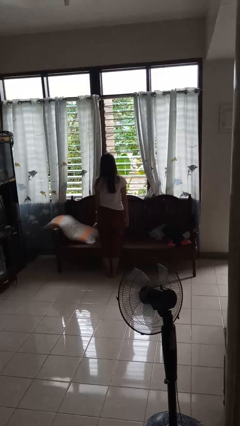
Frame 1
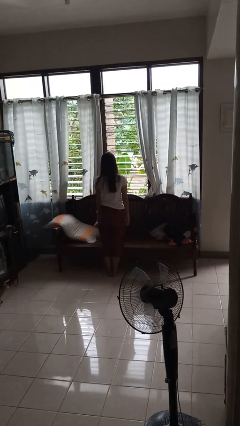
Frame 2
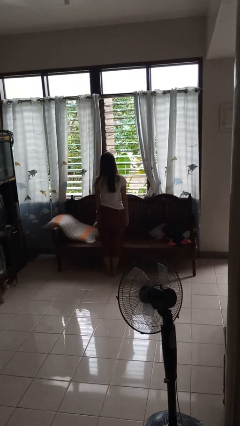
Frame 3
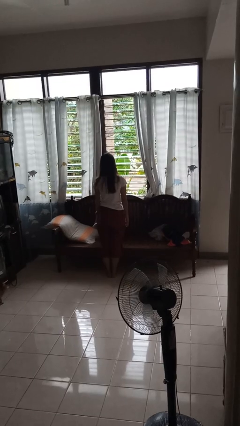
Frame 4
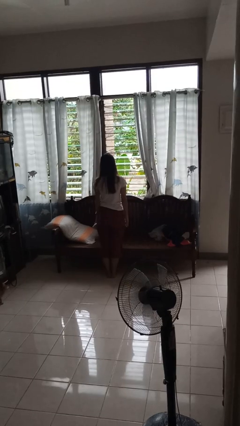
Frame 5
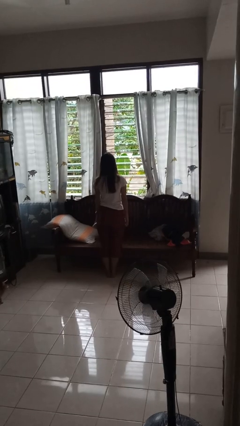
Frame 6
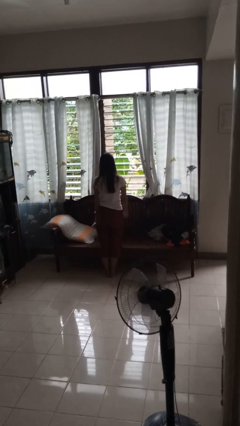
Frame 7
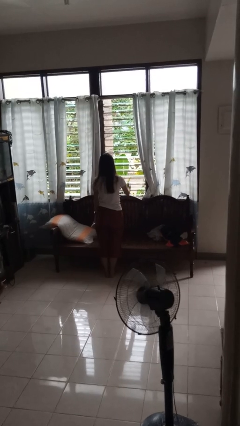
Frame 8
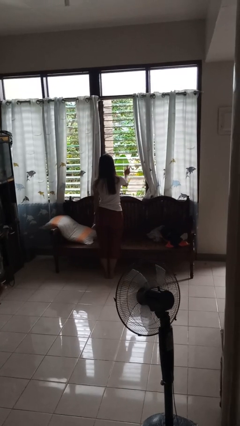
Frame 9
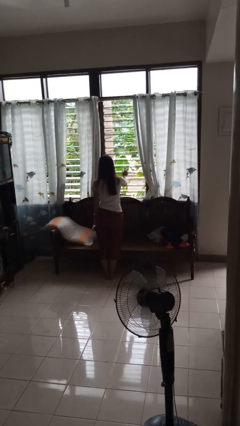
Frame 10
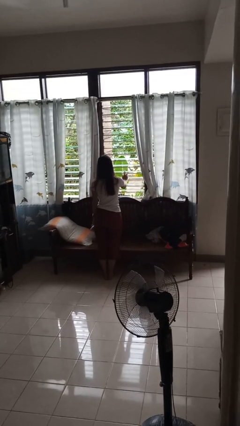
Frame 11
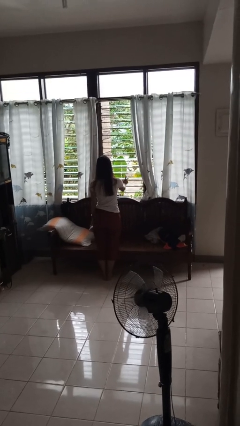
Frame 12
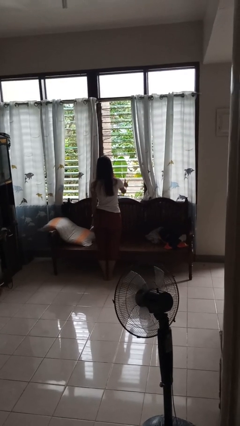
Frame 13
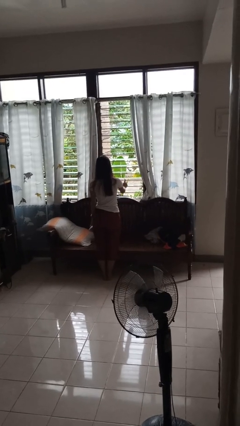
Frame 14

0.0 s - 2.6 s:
person sprays from bottle

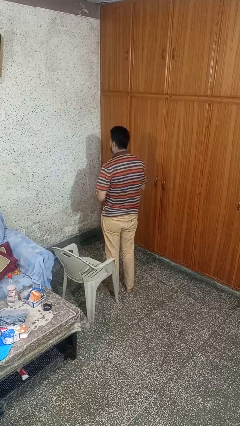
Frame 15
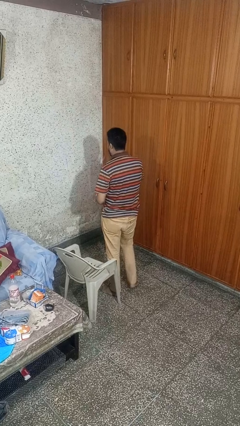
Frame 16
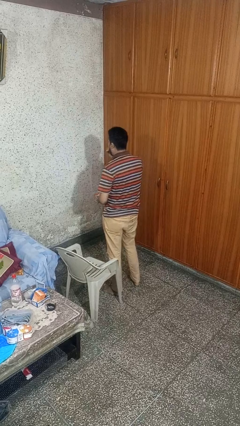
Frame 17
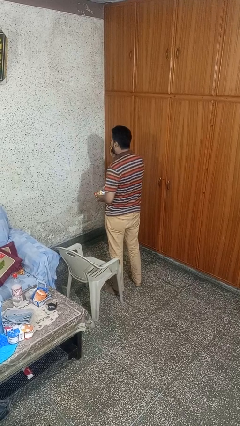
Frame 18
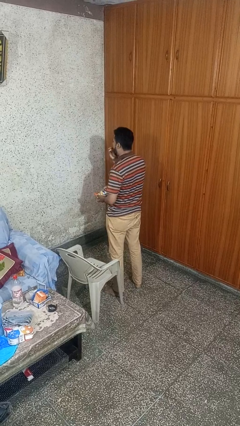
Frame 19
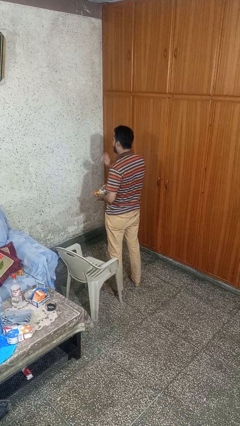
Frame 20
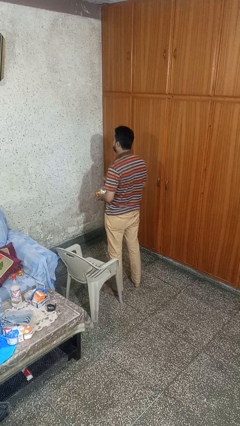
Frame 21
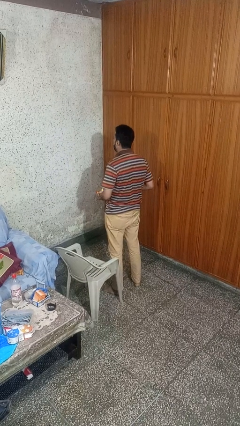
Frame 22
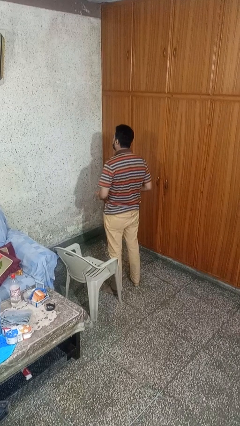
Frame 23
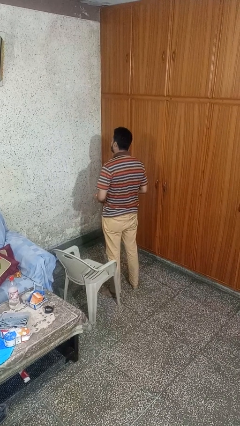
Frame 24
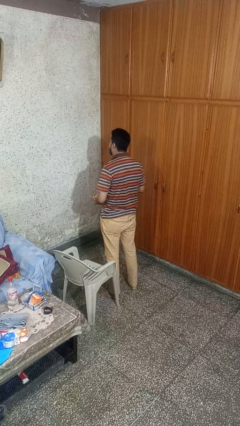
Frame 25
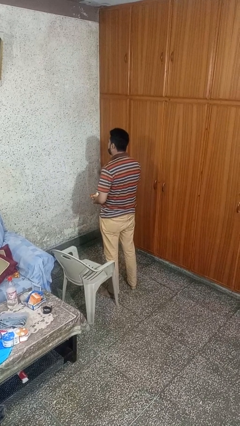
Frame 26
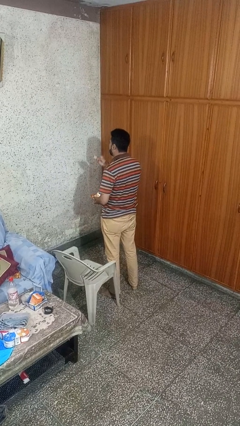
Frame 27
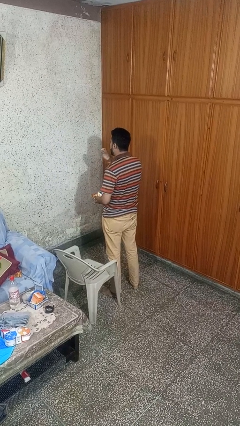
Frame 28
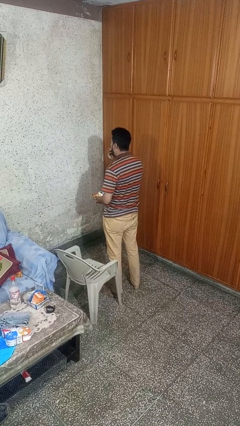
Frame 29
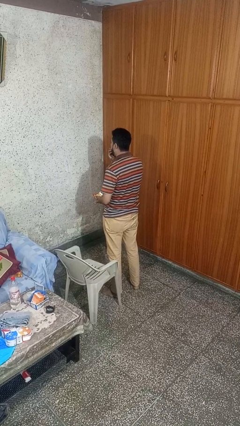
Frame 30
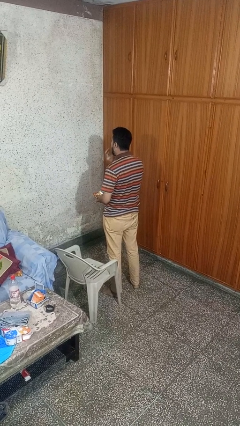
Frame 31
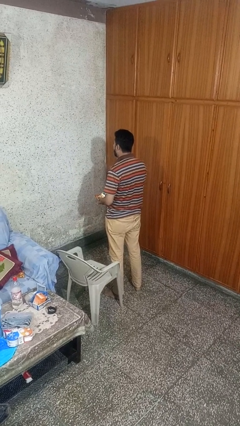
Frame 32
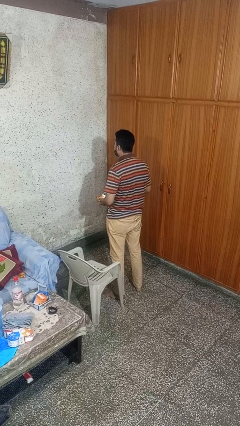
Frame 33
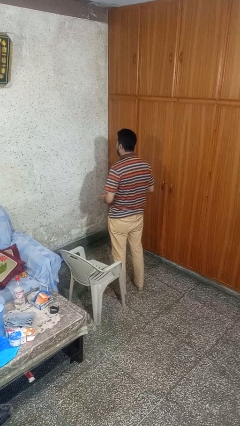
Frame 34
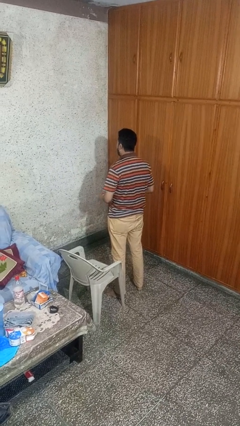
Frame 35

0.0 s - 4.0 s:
person eats snack from bag

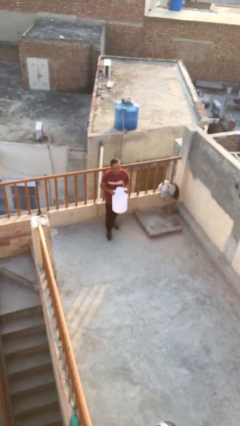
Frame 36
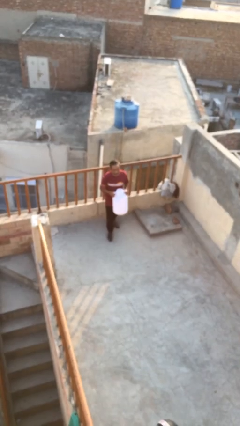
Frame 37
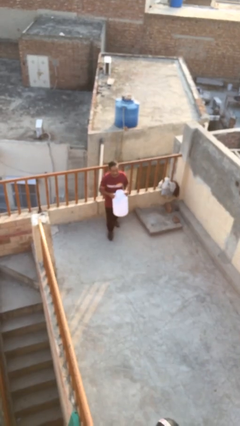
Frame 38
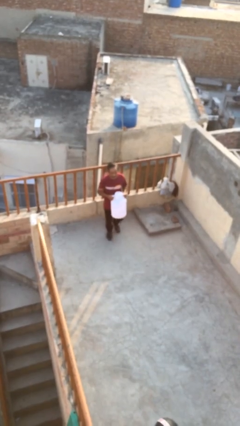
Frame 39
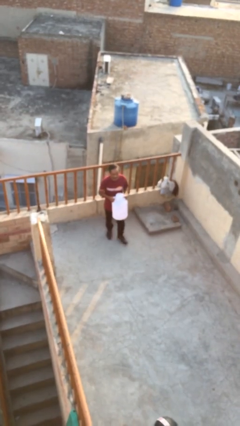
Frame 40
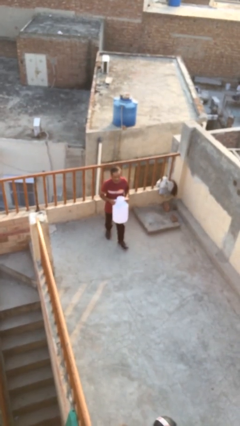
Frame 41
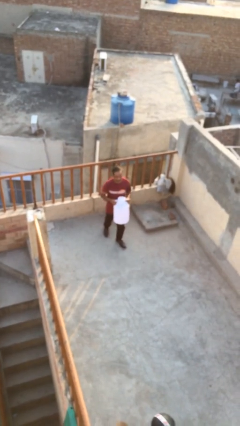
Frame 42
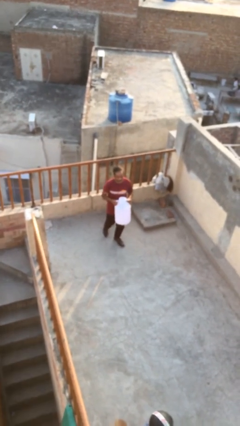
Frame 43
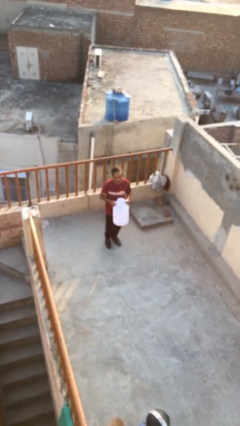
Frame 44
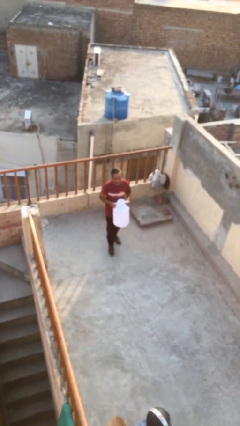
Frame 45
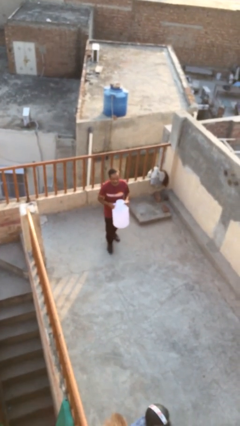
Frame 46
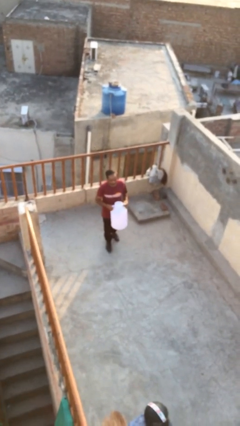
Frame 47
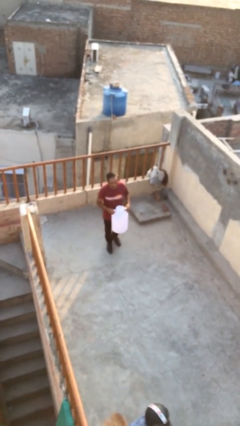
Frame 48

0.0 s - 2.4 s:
person carries heavy object

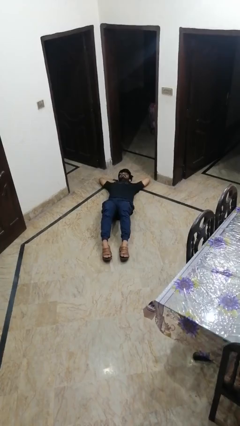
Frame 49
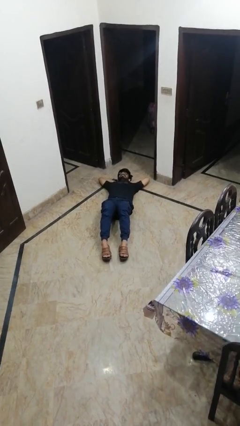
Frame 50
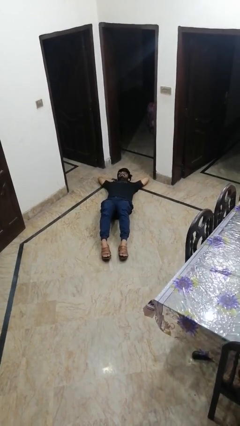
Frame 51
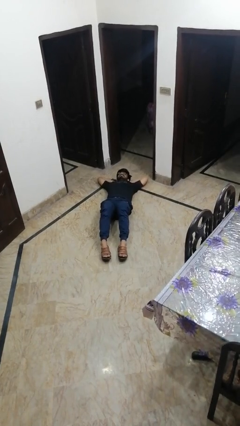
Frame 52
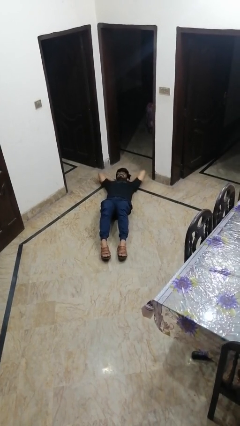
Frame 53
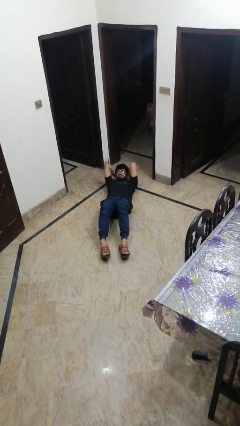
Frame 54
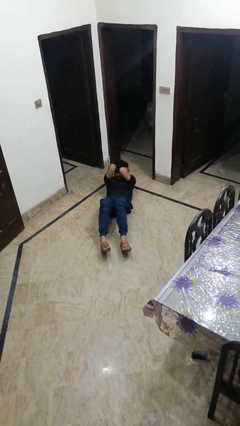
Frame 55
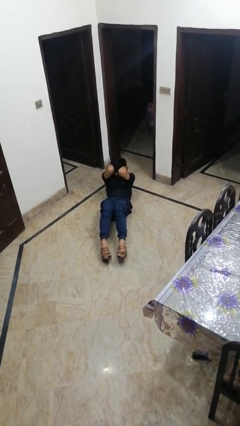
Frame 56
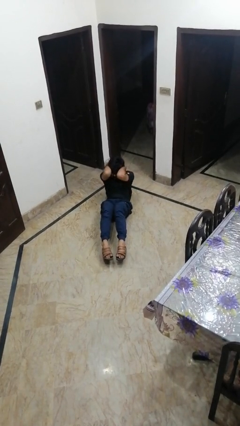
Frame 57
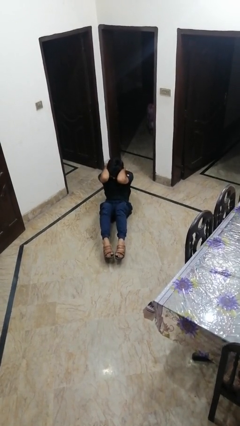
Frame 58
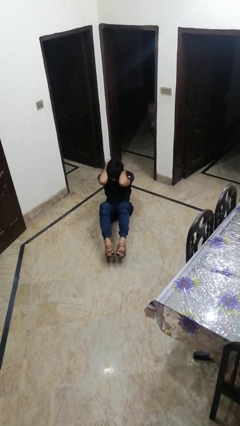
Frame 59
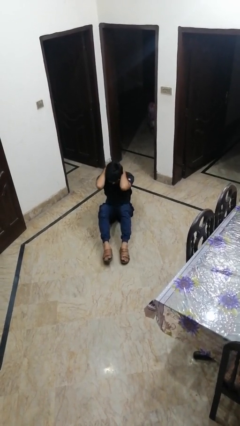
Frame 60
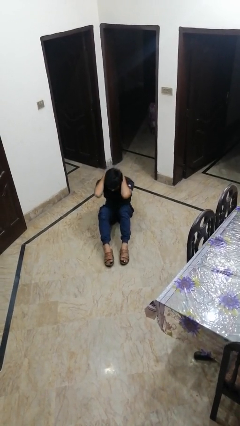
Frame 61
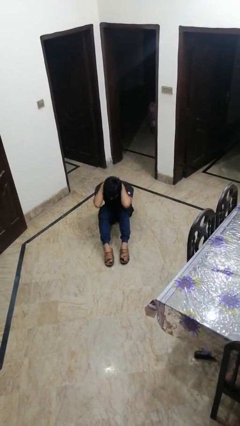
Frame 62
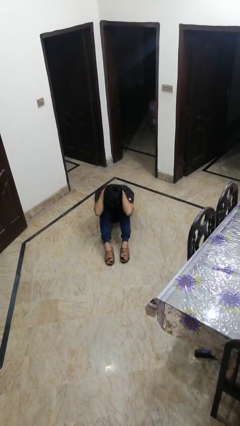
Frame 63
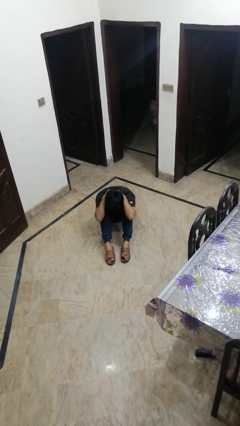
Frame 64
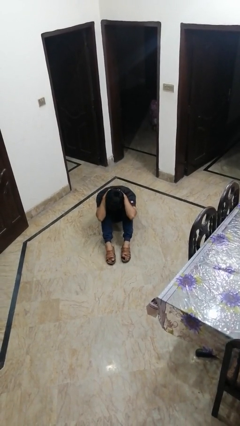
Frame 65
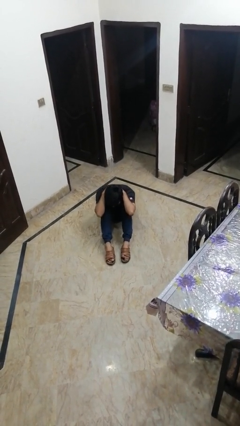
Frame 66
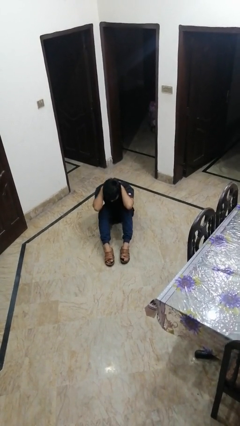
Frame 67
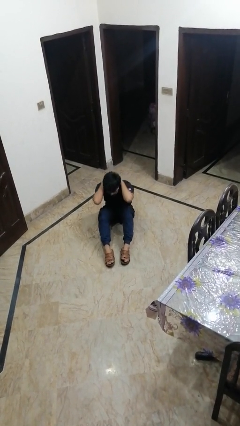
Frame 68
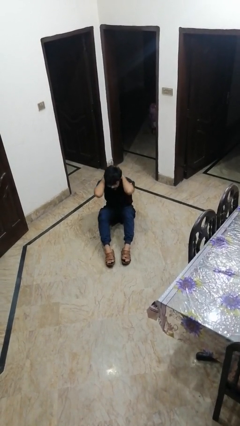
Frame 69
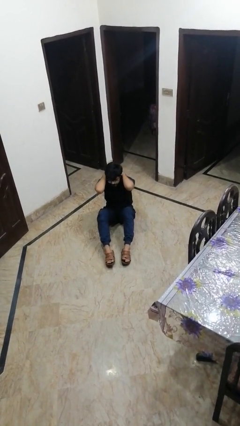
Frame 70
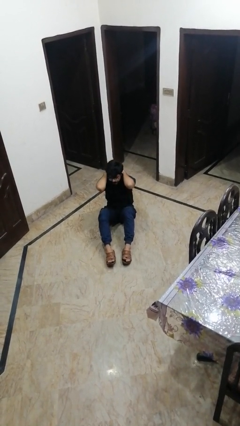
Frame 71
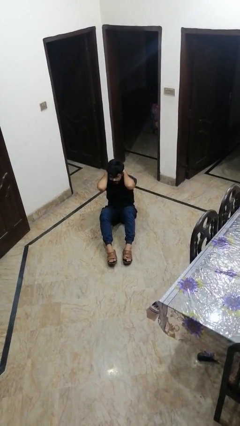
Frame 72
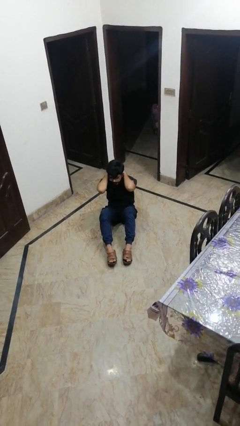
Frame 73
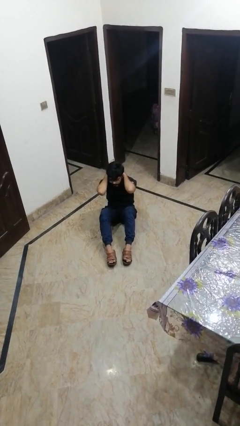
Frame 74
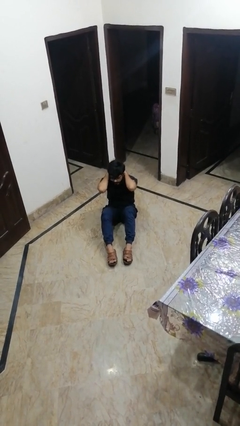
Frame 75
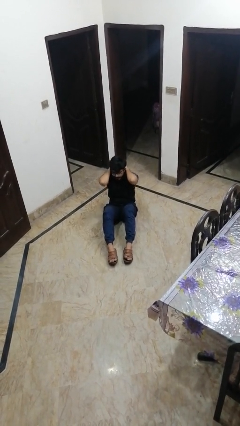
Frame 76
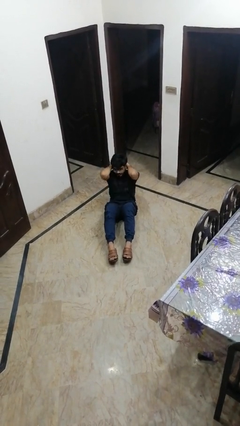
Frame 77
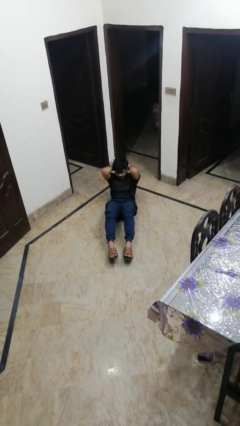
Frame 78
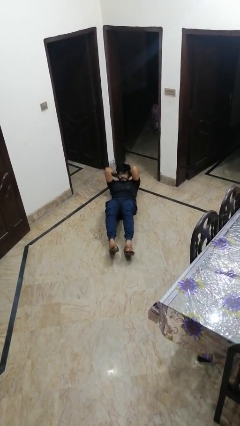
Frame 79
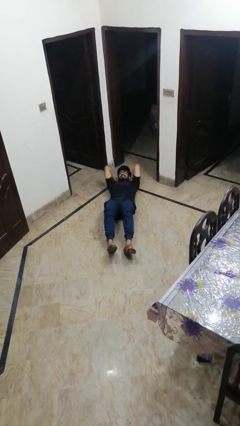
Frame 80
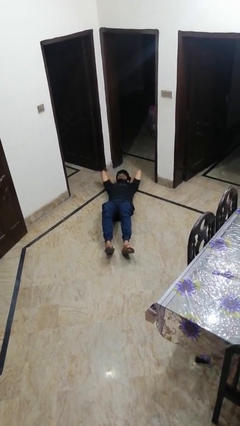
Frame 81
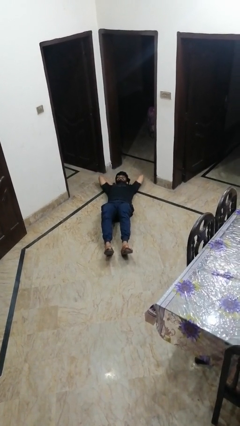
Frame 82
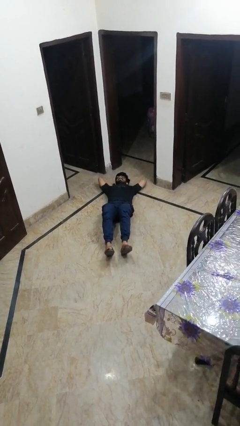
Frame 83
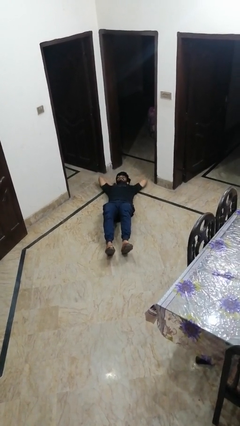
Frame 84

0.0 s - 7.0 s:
person exercises with situp

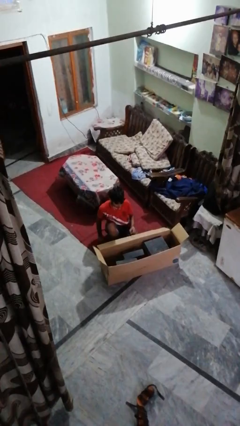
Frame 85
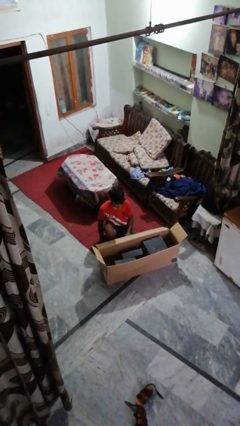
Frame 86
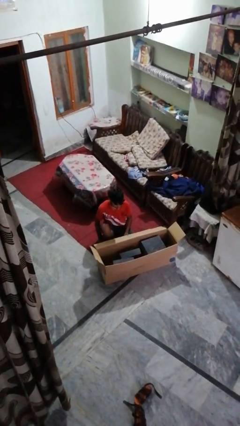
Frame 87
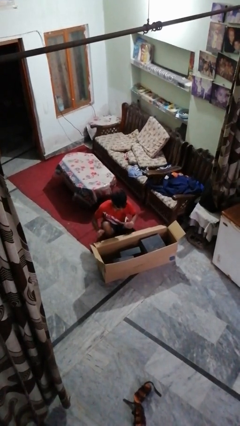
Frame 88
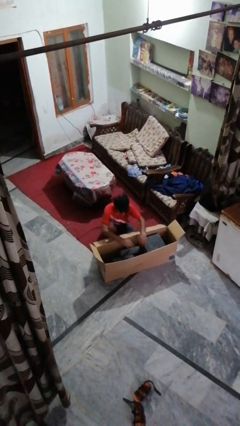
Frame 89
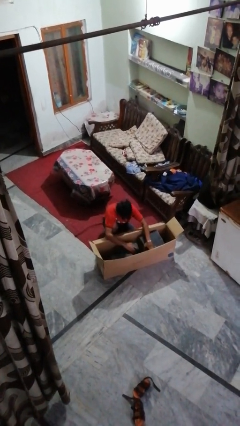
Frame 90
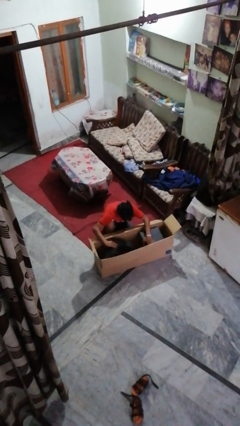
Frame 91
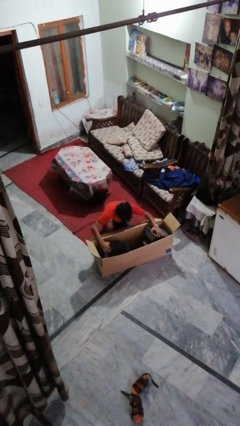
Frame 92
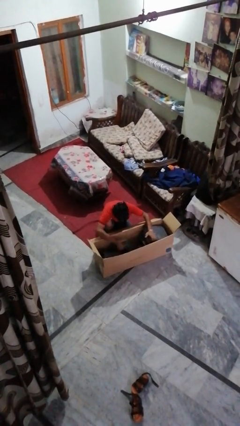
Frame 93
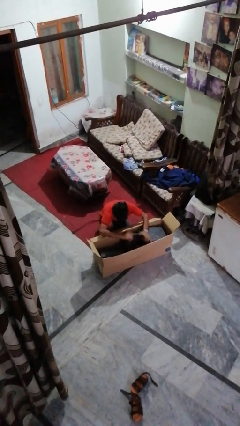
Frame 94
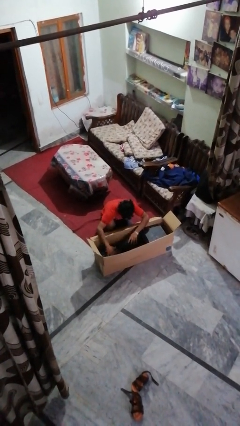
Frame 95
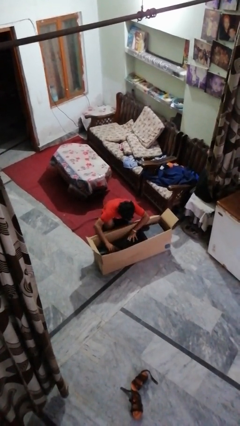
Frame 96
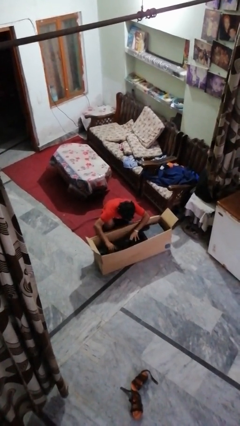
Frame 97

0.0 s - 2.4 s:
person searches in box
